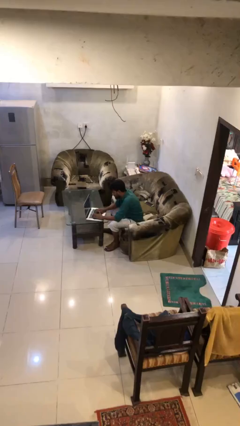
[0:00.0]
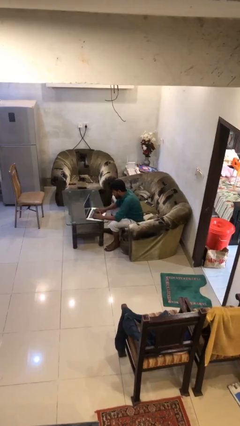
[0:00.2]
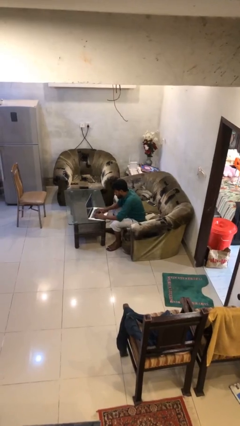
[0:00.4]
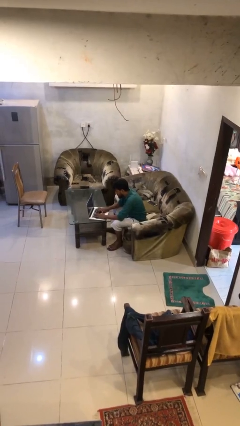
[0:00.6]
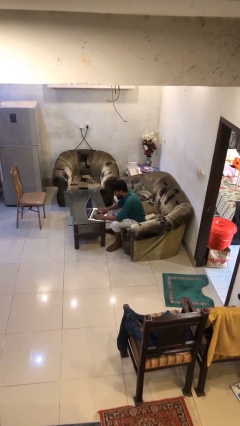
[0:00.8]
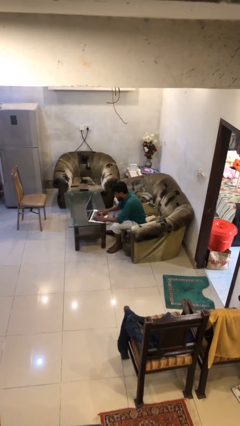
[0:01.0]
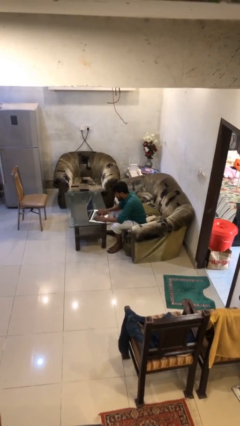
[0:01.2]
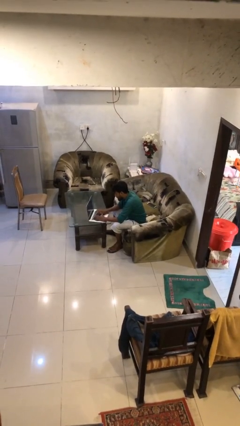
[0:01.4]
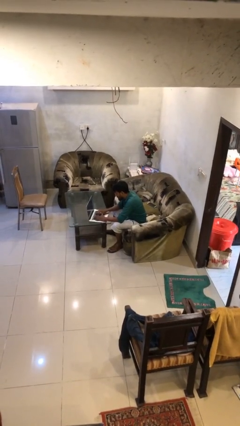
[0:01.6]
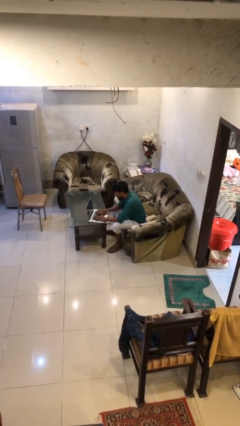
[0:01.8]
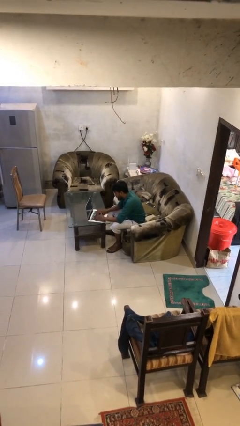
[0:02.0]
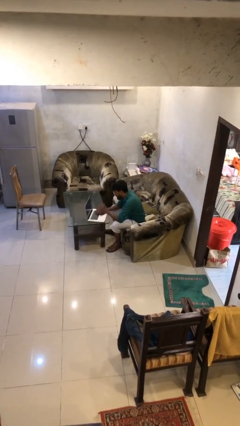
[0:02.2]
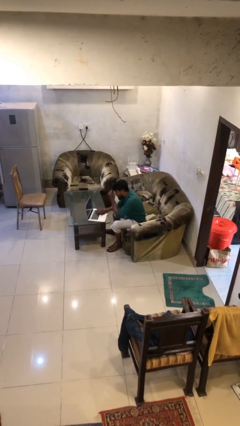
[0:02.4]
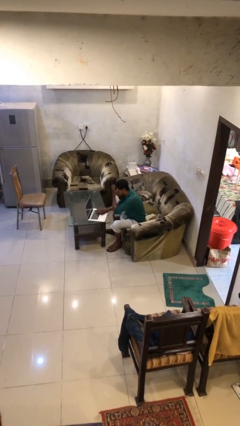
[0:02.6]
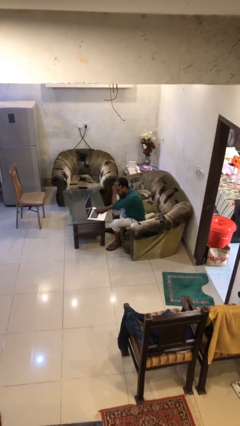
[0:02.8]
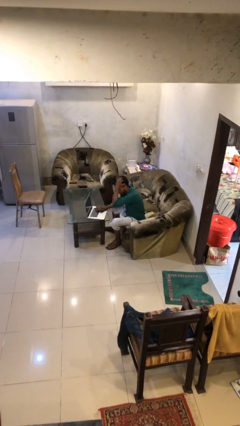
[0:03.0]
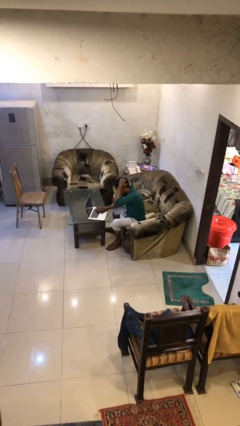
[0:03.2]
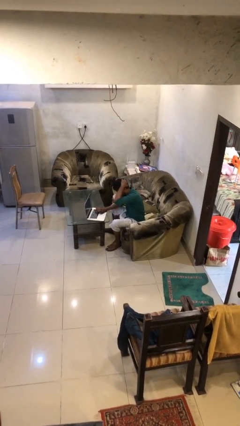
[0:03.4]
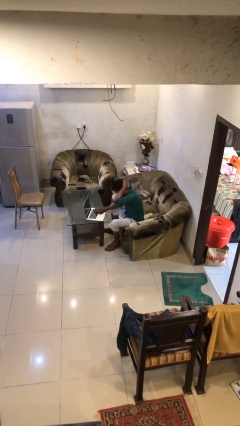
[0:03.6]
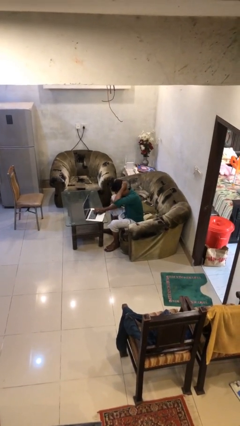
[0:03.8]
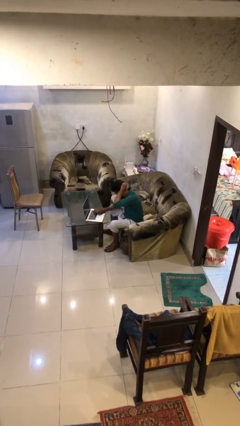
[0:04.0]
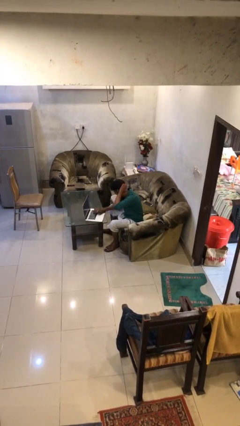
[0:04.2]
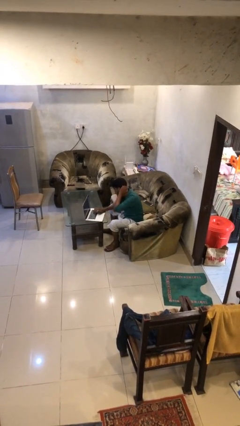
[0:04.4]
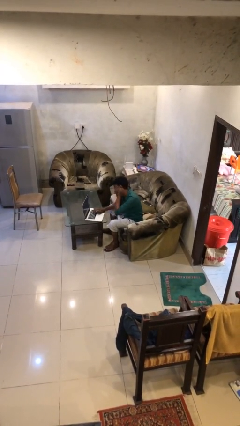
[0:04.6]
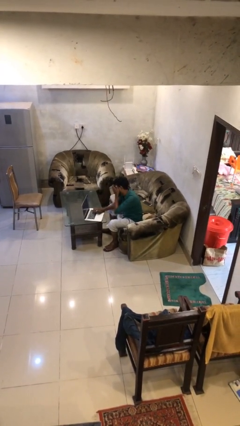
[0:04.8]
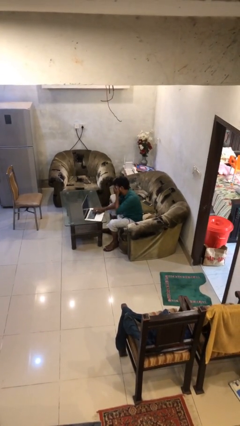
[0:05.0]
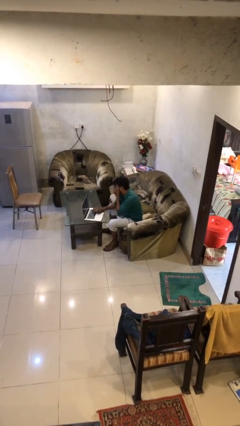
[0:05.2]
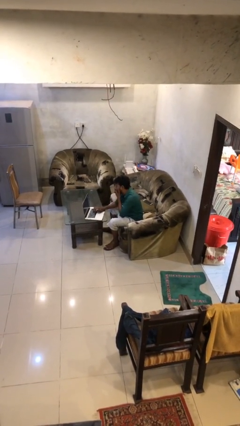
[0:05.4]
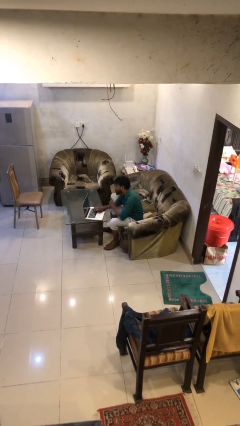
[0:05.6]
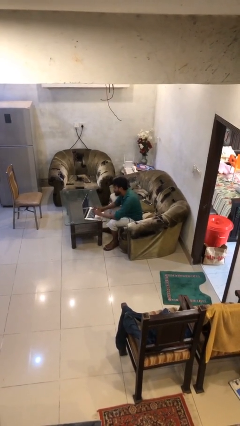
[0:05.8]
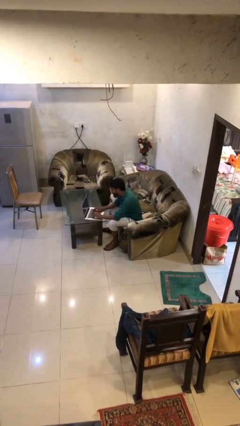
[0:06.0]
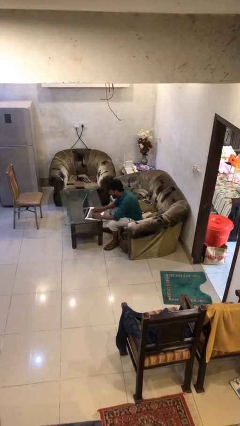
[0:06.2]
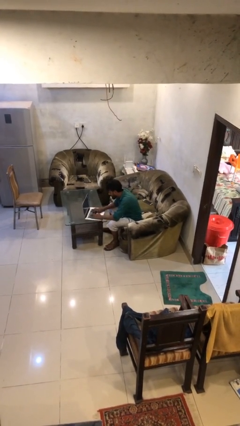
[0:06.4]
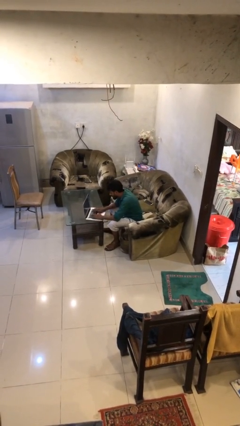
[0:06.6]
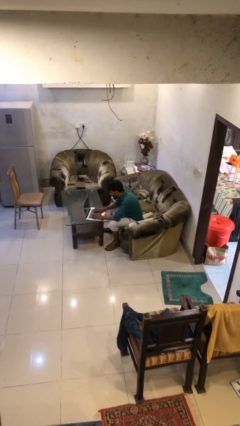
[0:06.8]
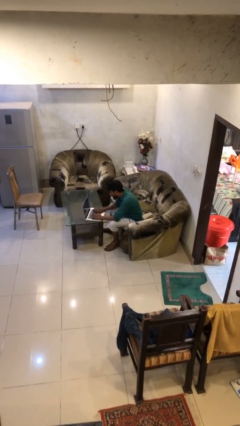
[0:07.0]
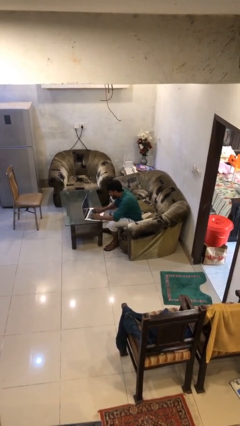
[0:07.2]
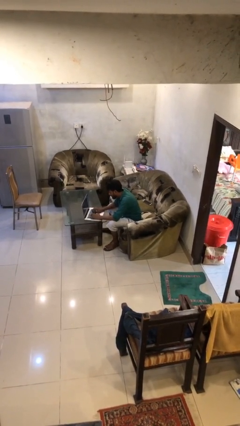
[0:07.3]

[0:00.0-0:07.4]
person interacts with laptop

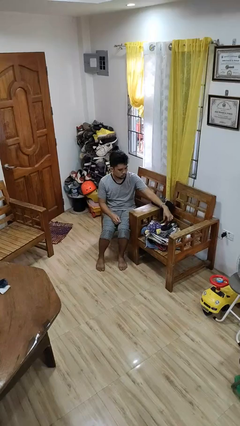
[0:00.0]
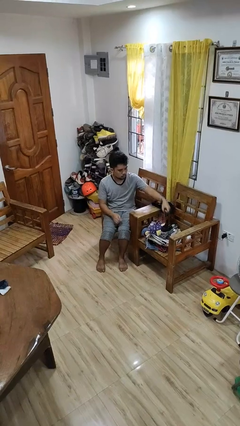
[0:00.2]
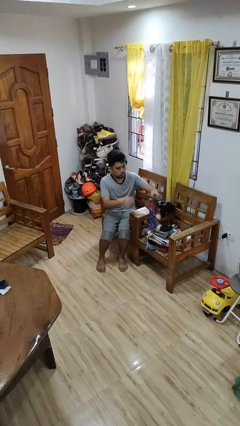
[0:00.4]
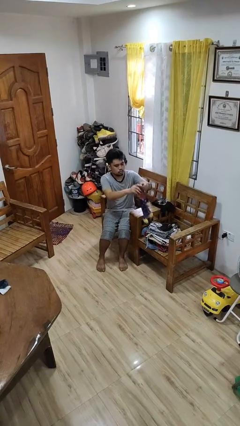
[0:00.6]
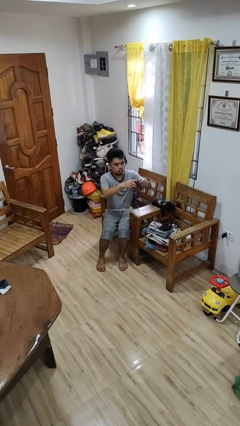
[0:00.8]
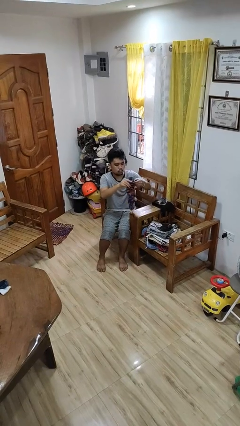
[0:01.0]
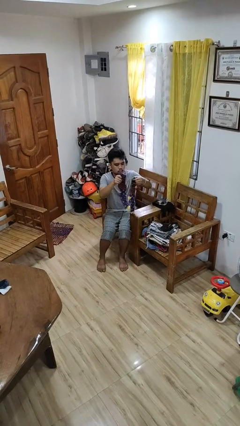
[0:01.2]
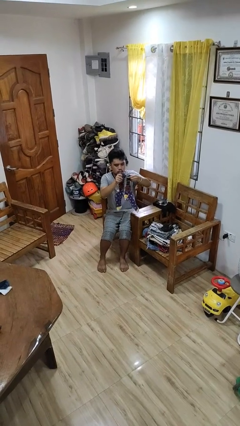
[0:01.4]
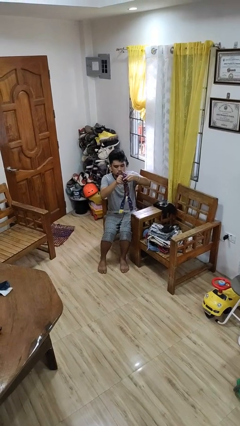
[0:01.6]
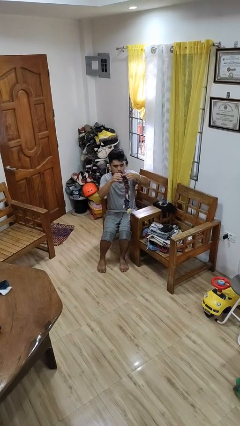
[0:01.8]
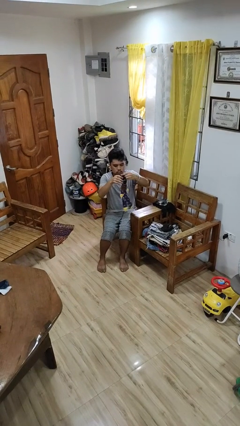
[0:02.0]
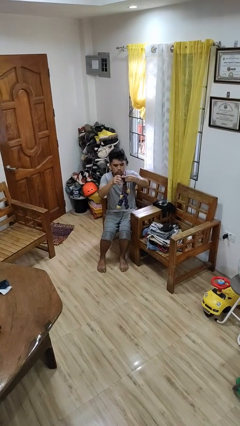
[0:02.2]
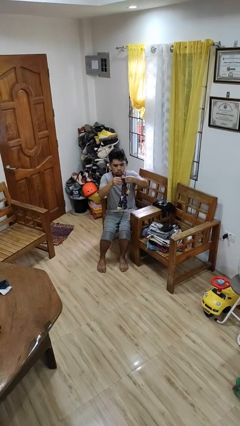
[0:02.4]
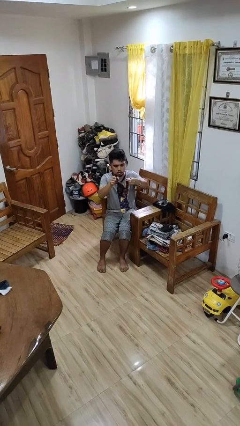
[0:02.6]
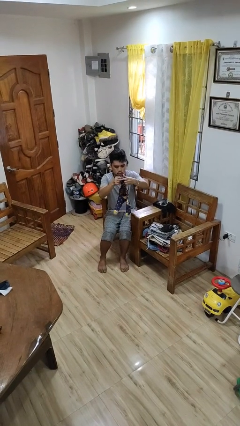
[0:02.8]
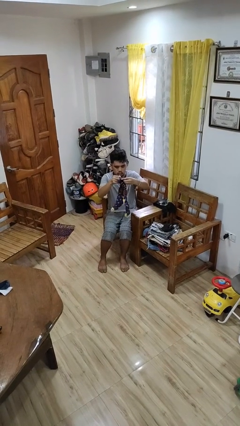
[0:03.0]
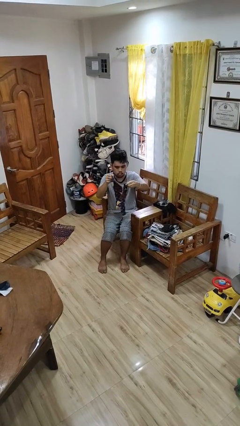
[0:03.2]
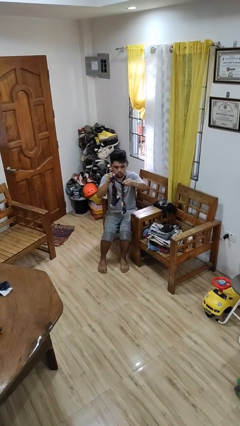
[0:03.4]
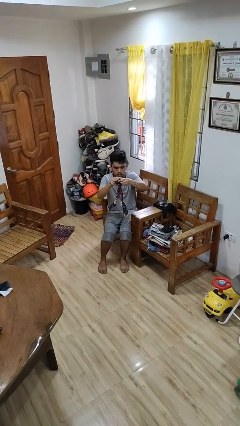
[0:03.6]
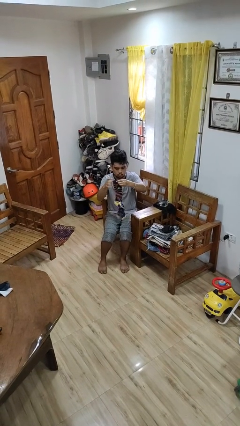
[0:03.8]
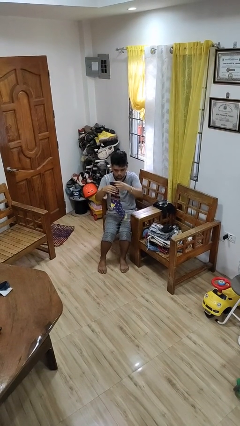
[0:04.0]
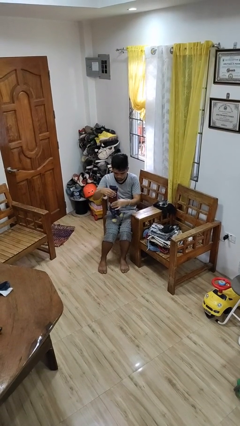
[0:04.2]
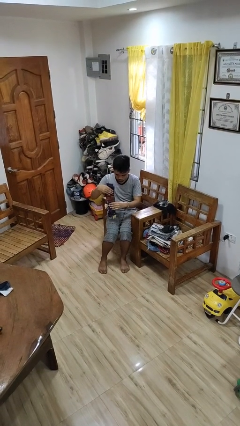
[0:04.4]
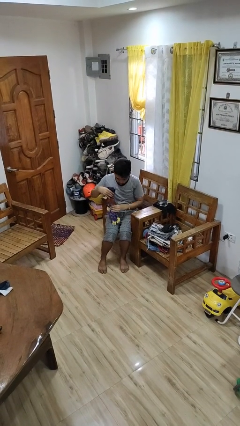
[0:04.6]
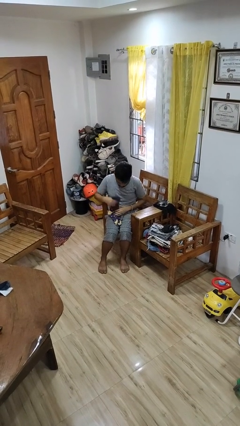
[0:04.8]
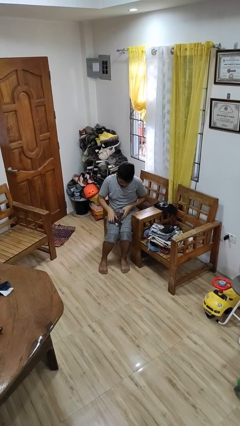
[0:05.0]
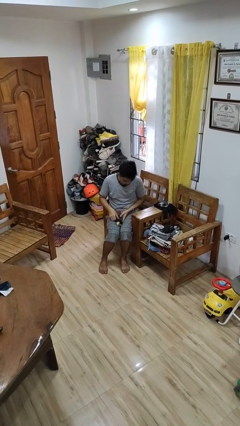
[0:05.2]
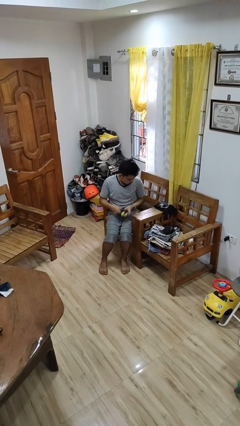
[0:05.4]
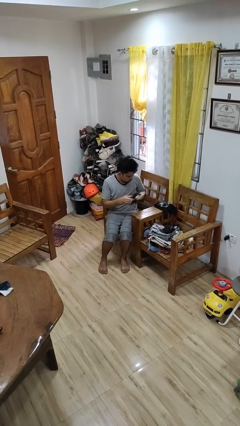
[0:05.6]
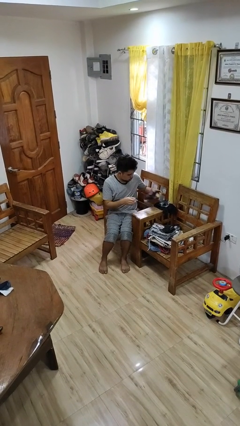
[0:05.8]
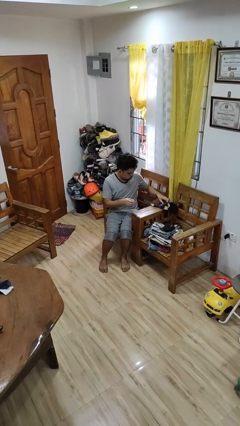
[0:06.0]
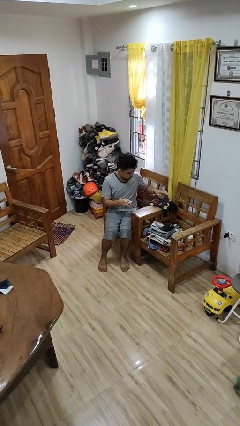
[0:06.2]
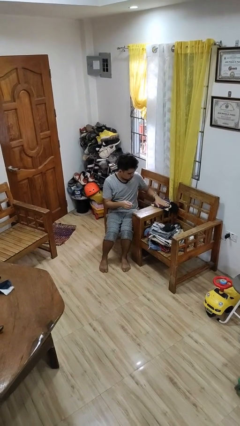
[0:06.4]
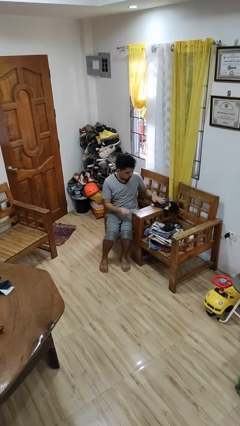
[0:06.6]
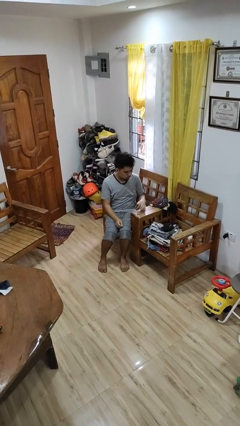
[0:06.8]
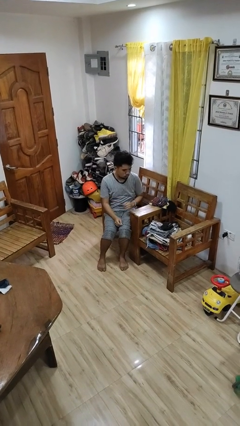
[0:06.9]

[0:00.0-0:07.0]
person folds socks

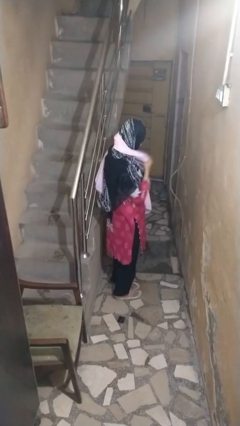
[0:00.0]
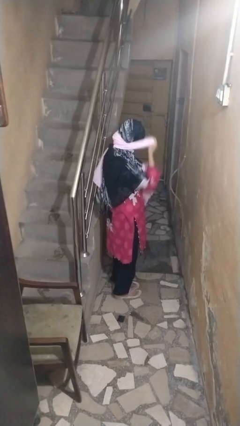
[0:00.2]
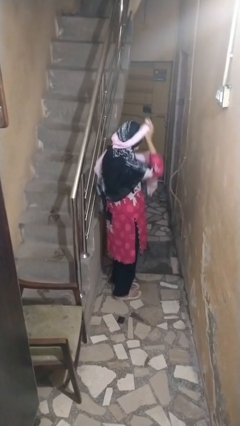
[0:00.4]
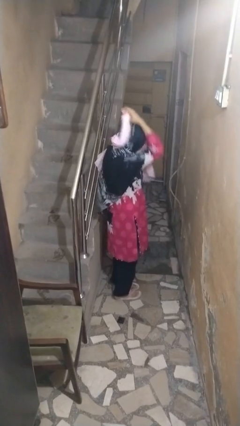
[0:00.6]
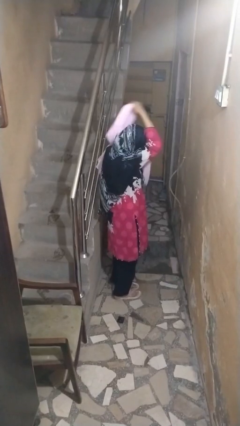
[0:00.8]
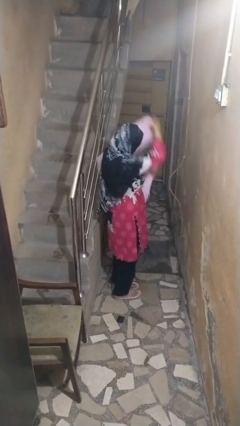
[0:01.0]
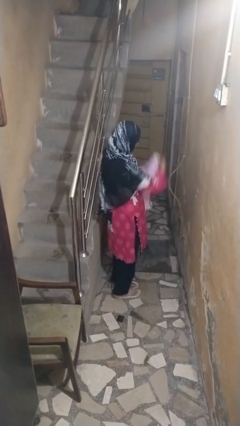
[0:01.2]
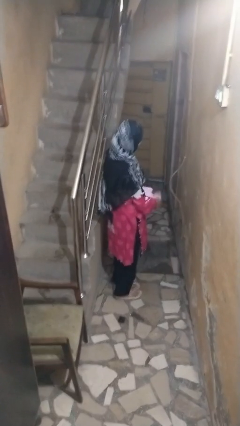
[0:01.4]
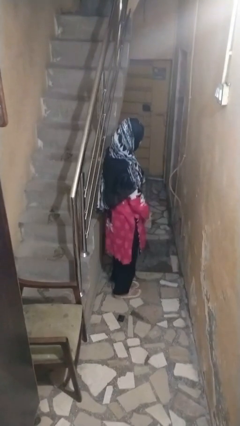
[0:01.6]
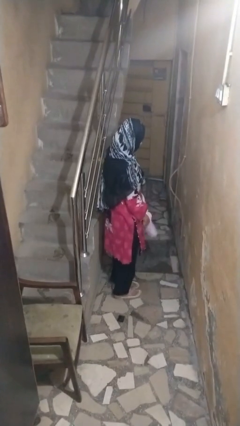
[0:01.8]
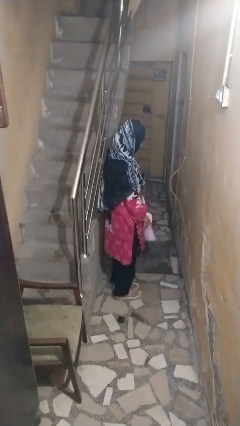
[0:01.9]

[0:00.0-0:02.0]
person takes off scarf

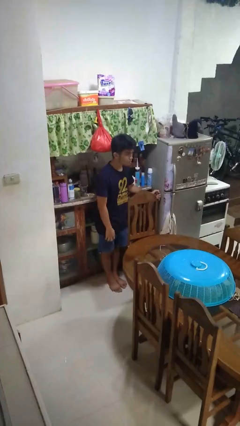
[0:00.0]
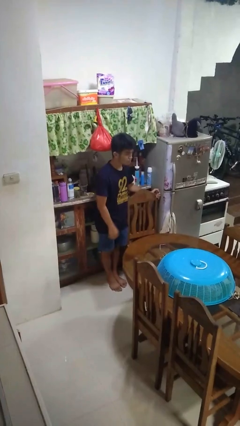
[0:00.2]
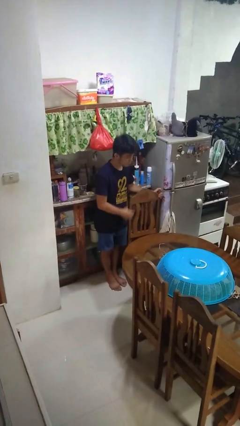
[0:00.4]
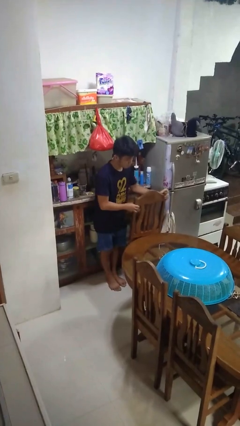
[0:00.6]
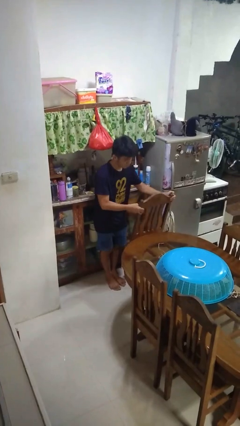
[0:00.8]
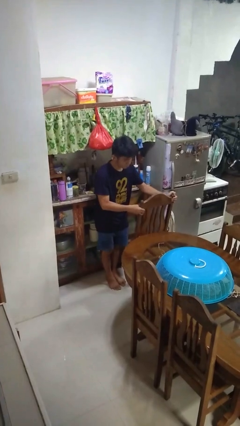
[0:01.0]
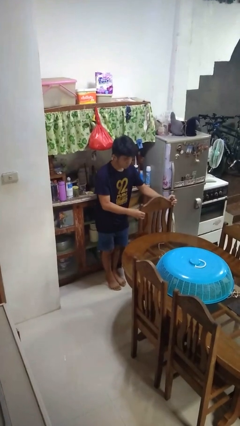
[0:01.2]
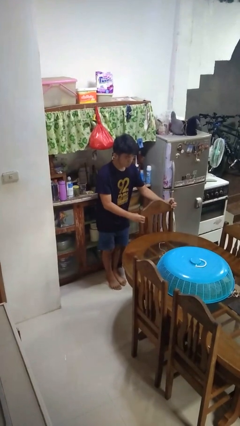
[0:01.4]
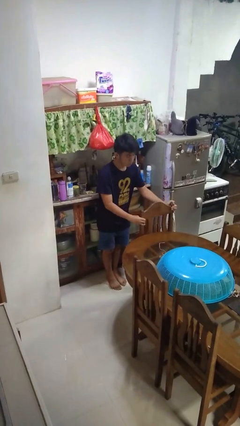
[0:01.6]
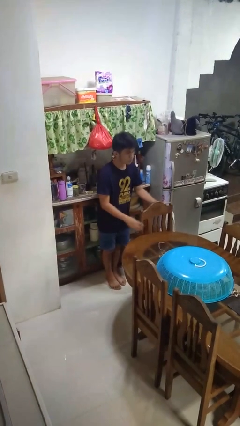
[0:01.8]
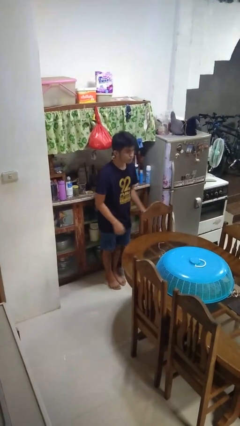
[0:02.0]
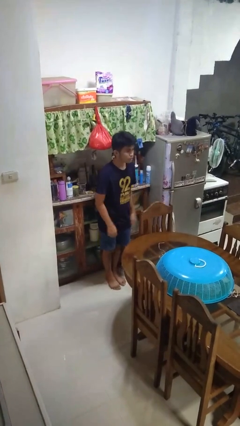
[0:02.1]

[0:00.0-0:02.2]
person pushes in chair
